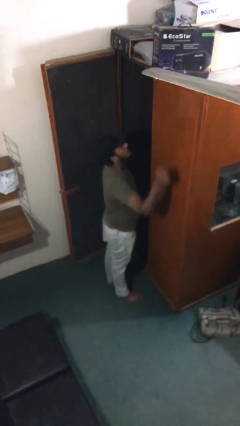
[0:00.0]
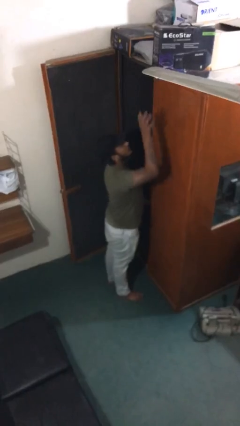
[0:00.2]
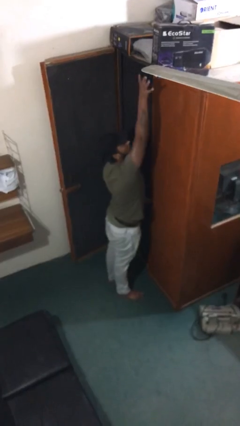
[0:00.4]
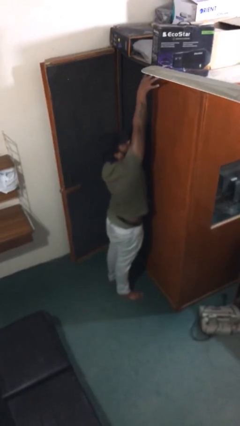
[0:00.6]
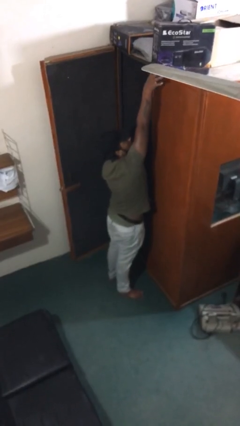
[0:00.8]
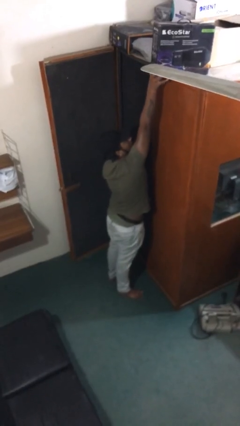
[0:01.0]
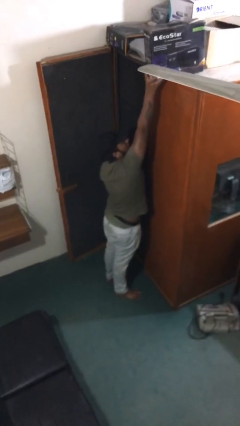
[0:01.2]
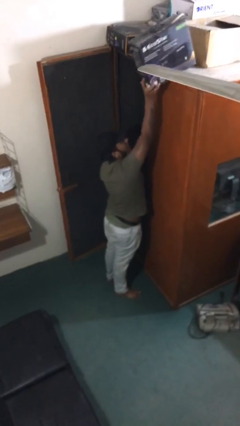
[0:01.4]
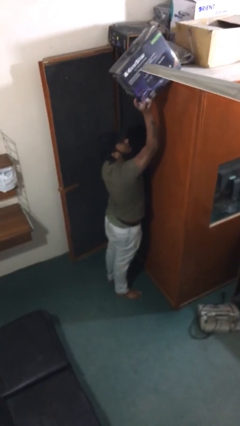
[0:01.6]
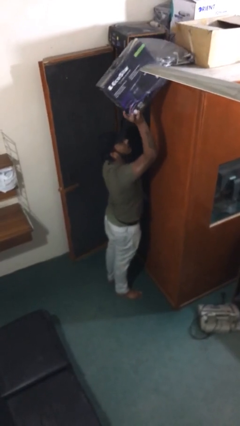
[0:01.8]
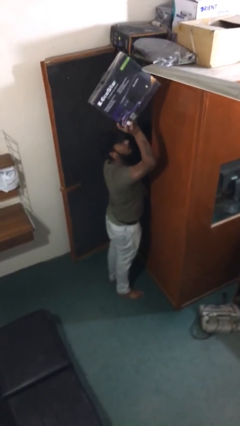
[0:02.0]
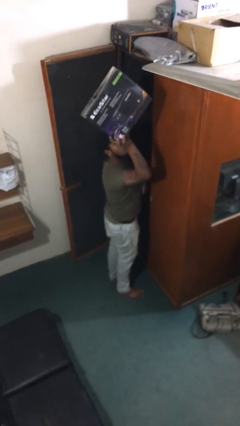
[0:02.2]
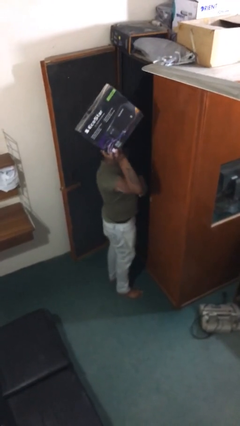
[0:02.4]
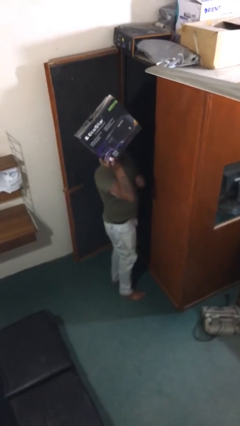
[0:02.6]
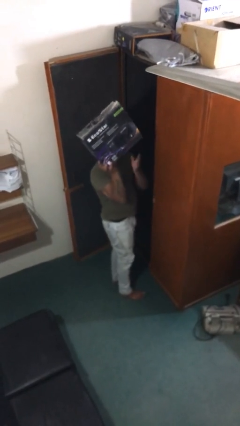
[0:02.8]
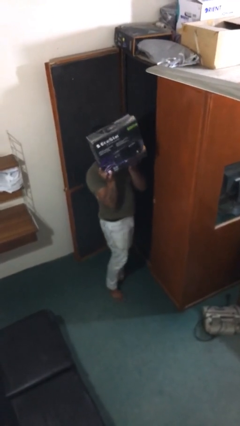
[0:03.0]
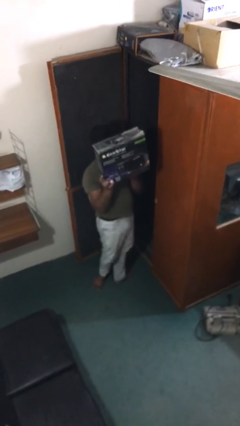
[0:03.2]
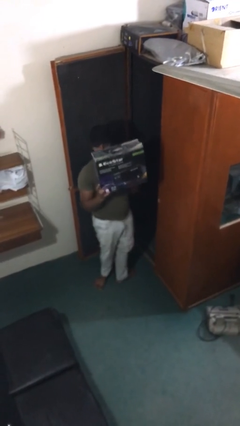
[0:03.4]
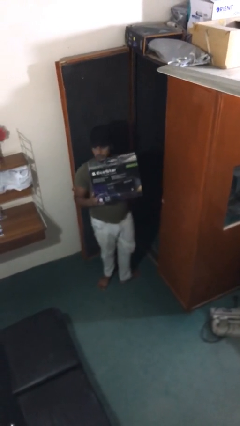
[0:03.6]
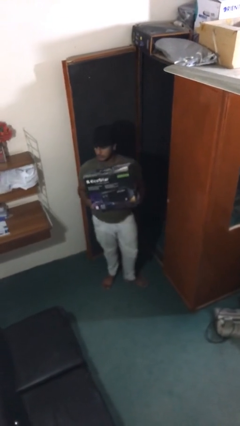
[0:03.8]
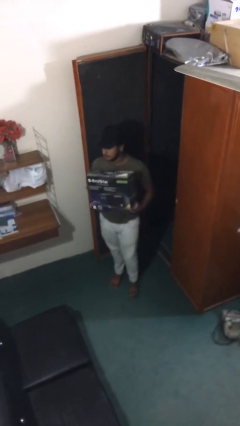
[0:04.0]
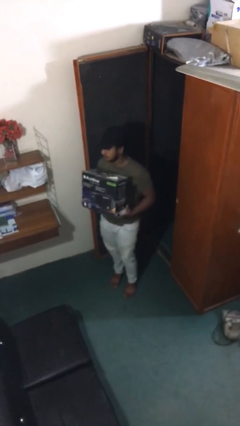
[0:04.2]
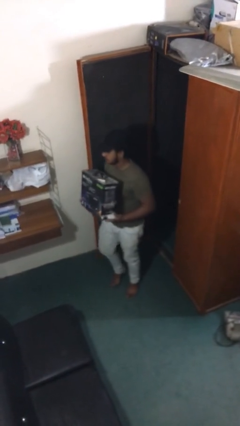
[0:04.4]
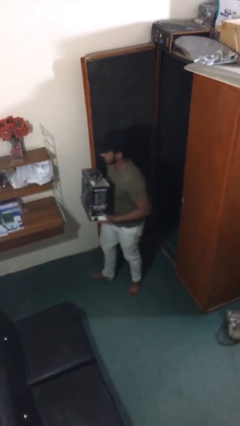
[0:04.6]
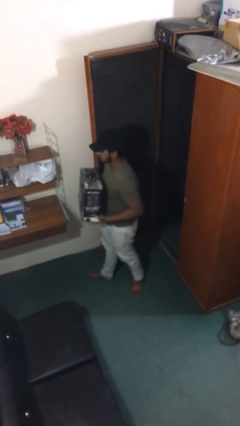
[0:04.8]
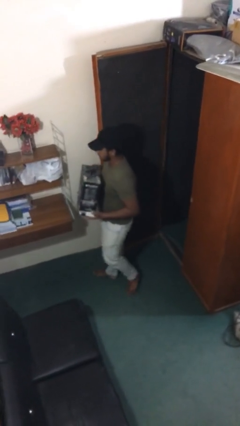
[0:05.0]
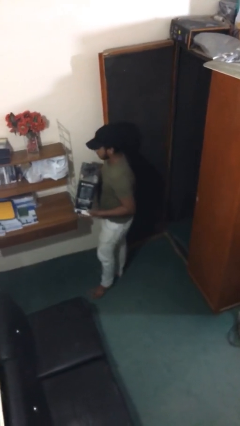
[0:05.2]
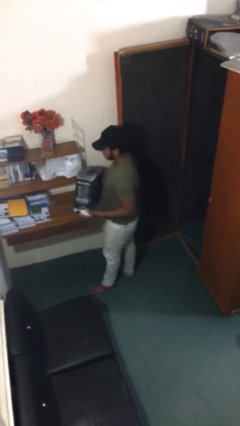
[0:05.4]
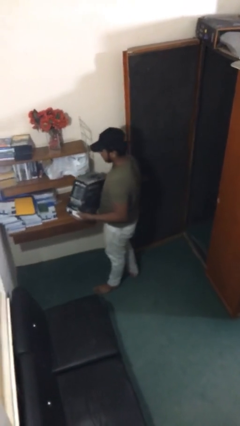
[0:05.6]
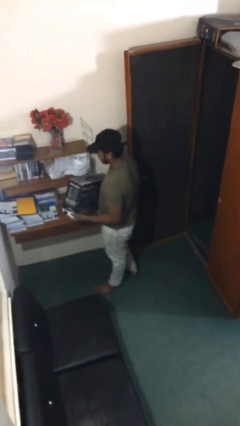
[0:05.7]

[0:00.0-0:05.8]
person picks up object from shelf

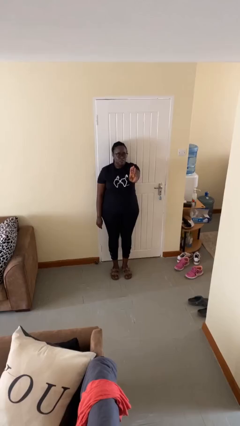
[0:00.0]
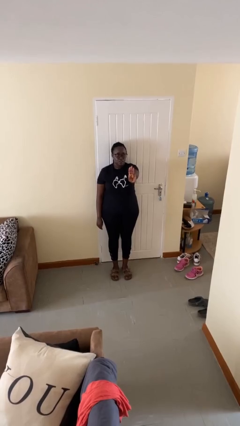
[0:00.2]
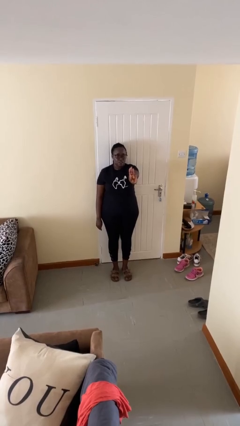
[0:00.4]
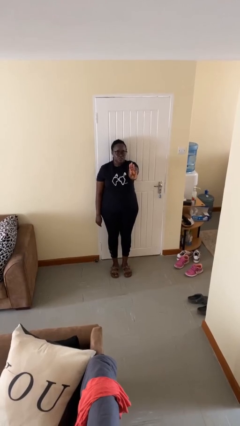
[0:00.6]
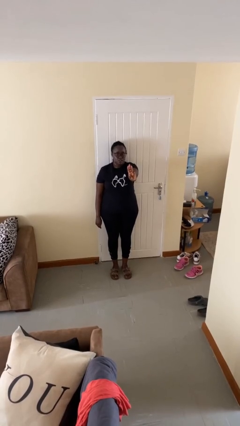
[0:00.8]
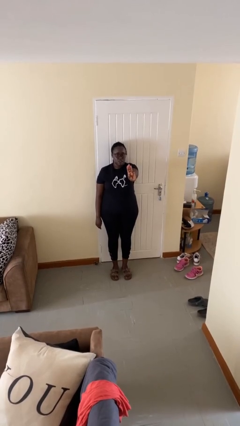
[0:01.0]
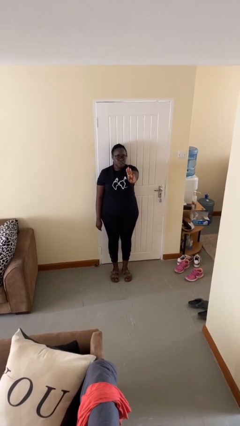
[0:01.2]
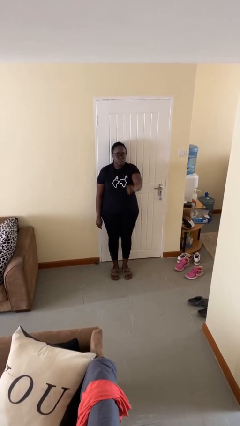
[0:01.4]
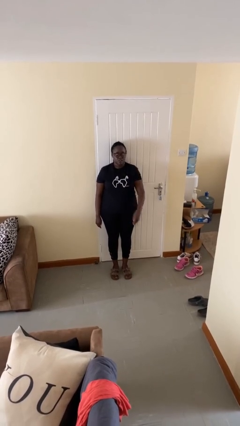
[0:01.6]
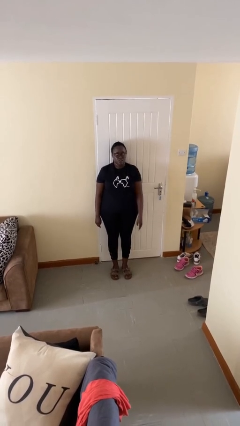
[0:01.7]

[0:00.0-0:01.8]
person gestures number three

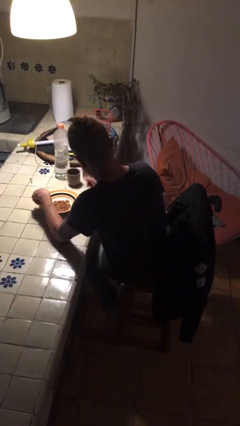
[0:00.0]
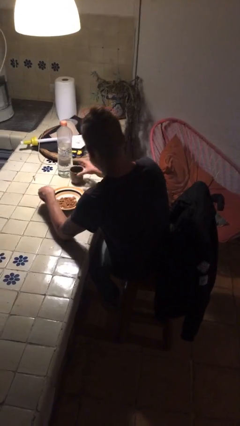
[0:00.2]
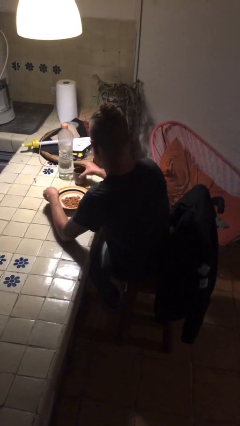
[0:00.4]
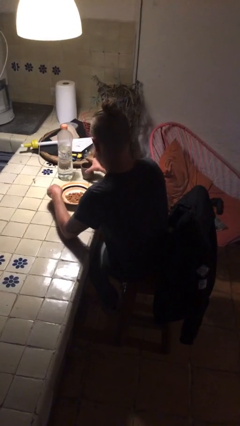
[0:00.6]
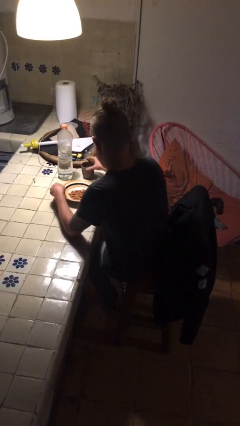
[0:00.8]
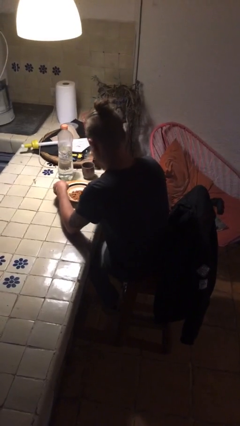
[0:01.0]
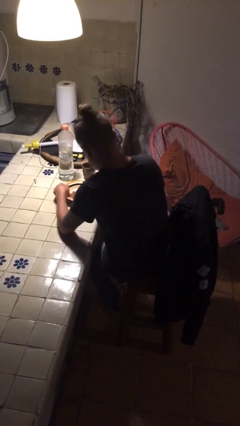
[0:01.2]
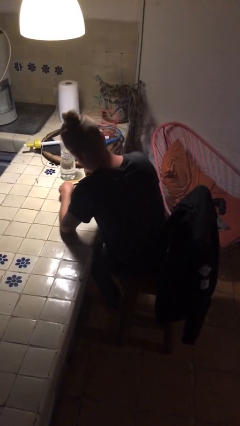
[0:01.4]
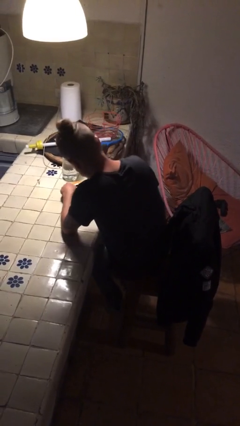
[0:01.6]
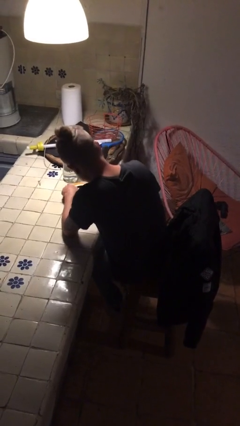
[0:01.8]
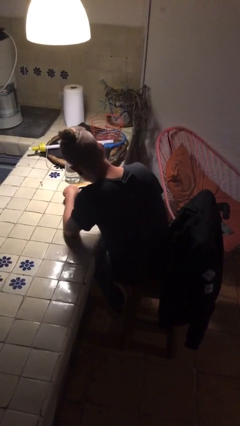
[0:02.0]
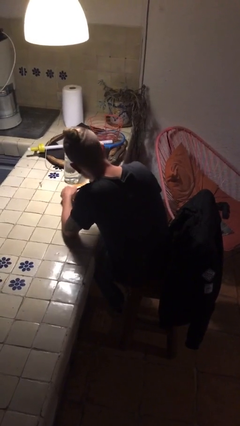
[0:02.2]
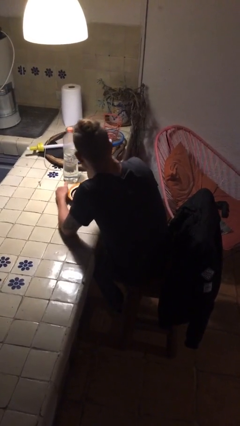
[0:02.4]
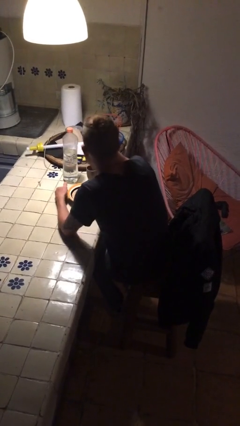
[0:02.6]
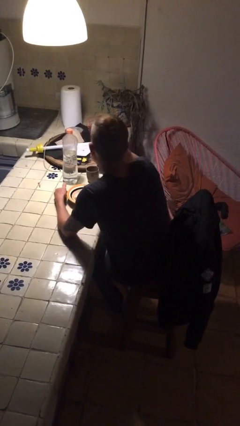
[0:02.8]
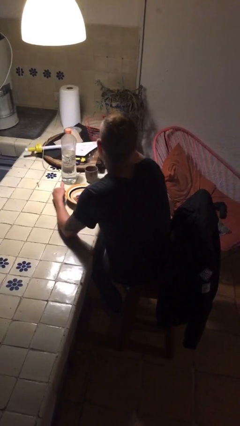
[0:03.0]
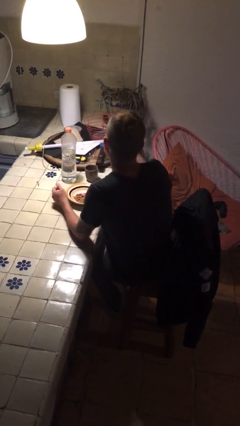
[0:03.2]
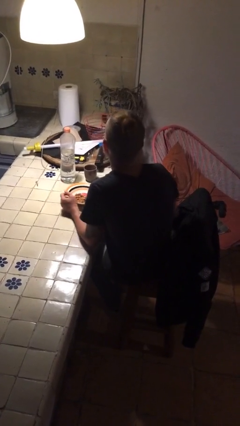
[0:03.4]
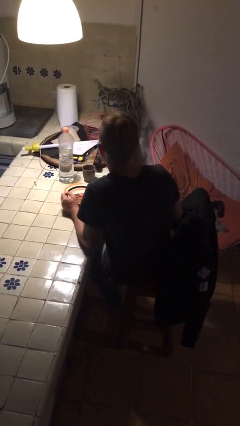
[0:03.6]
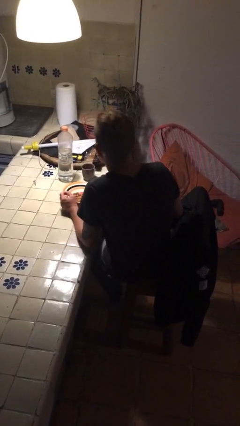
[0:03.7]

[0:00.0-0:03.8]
person eats with utensil

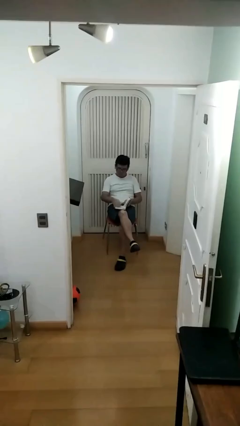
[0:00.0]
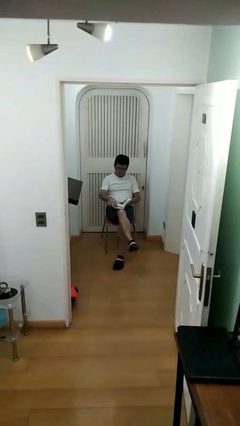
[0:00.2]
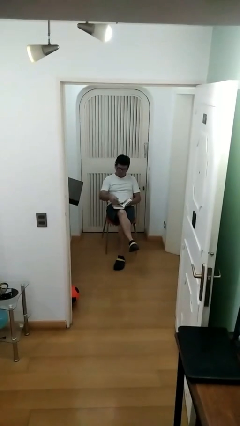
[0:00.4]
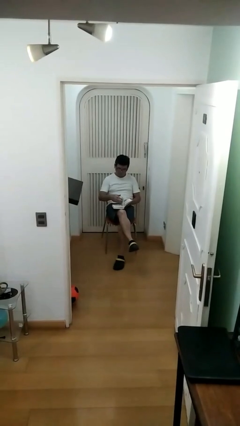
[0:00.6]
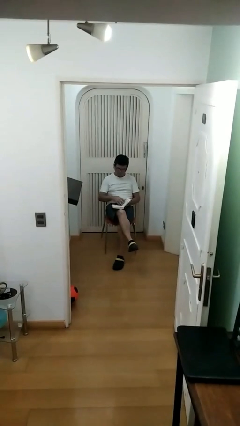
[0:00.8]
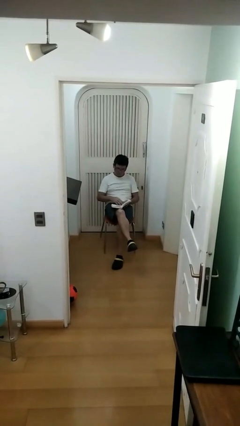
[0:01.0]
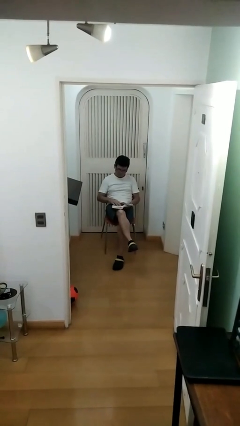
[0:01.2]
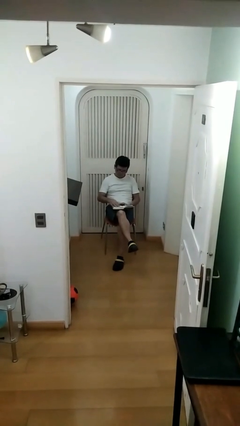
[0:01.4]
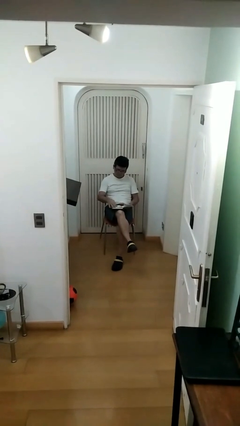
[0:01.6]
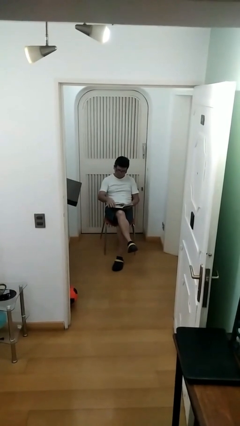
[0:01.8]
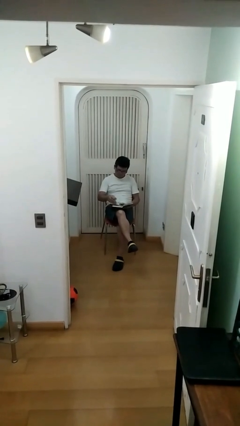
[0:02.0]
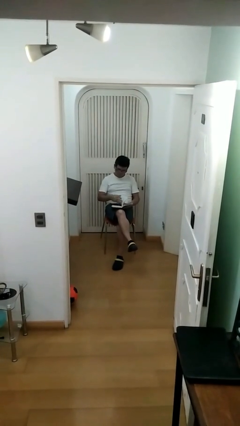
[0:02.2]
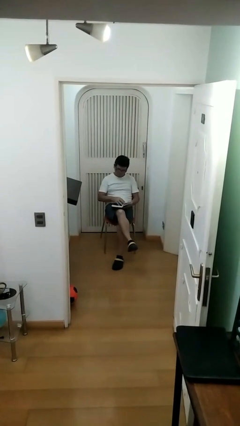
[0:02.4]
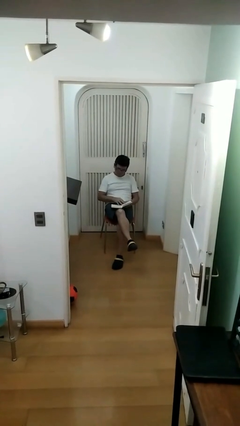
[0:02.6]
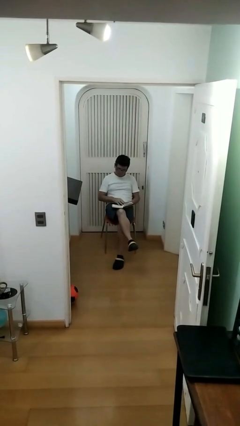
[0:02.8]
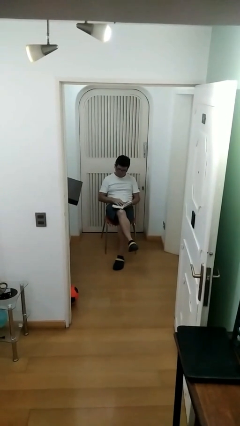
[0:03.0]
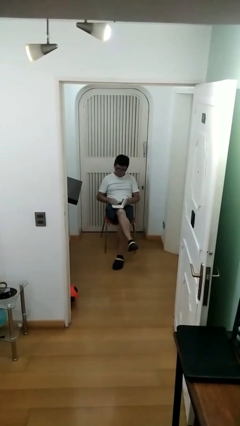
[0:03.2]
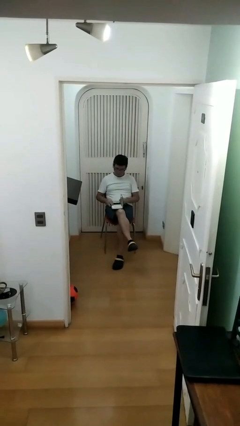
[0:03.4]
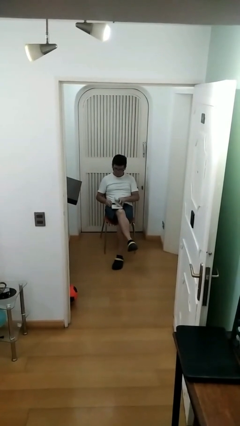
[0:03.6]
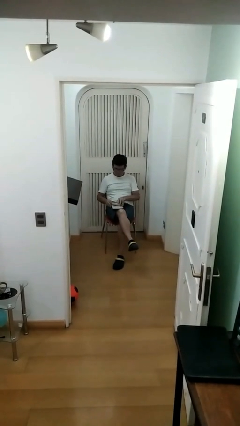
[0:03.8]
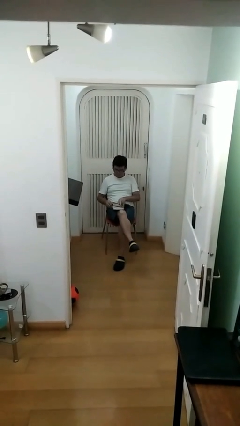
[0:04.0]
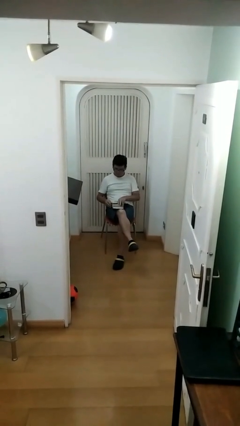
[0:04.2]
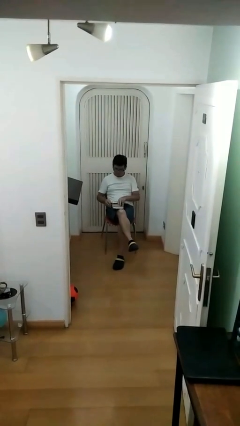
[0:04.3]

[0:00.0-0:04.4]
person reads document

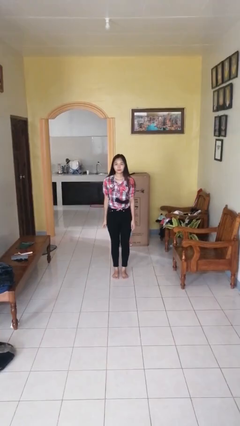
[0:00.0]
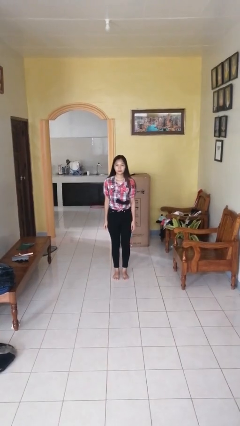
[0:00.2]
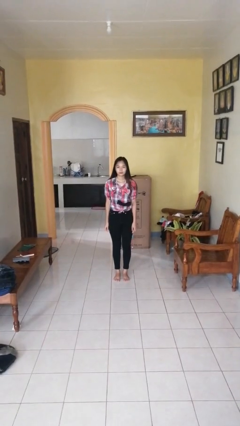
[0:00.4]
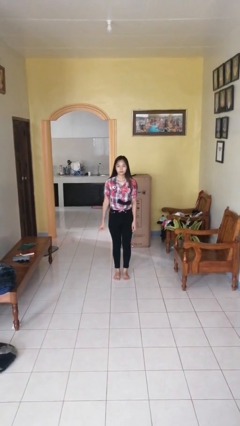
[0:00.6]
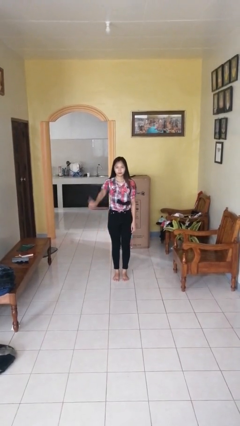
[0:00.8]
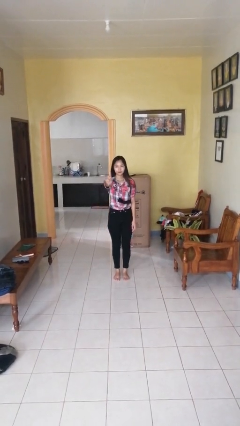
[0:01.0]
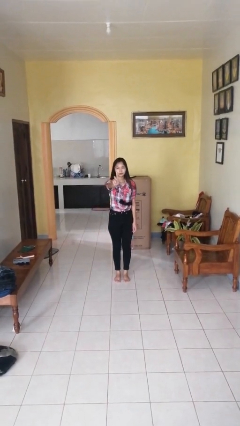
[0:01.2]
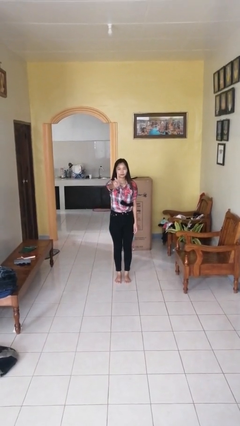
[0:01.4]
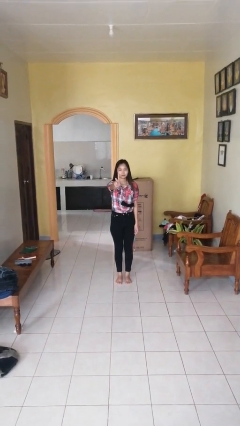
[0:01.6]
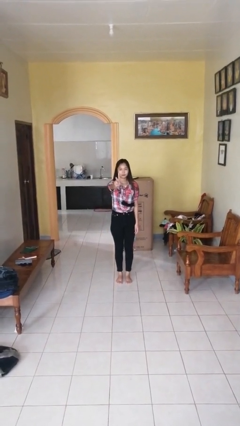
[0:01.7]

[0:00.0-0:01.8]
person gestures number one

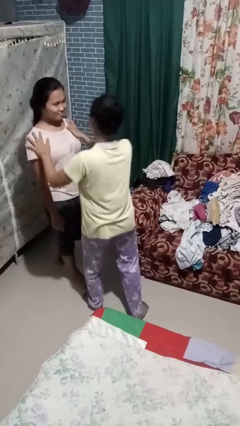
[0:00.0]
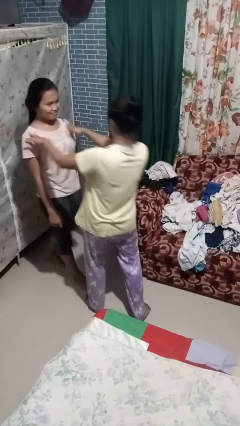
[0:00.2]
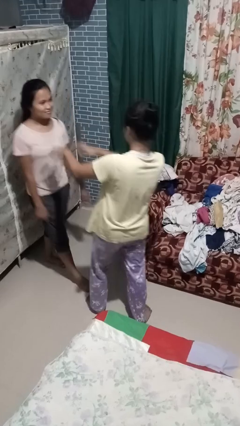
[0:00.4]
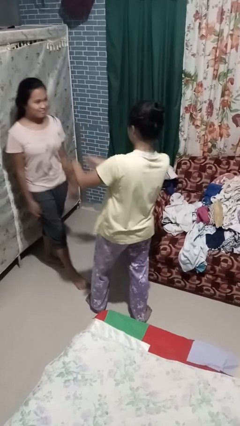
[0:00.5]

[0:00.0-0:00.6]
person shoves person
